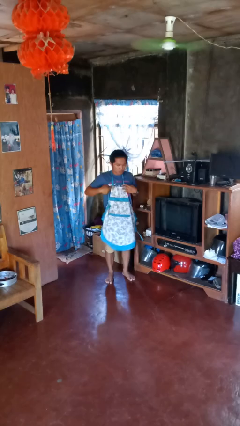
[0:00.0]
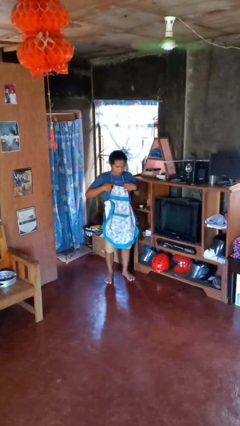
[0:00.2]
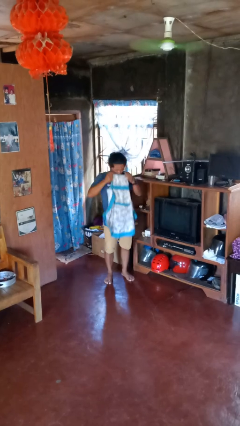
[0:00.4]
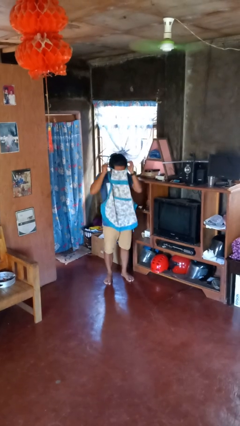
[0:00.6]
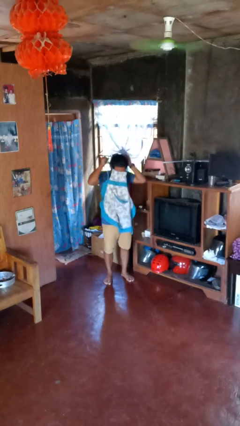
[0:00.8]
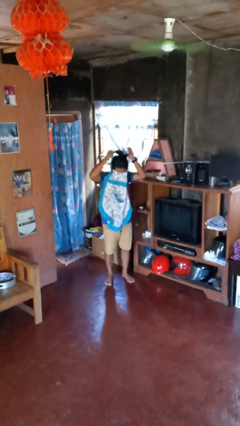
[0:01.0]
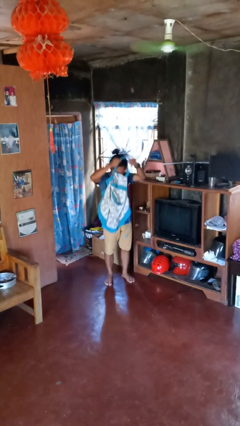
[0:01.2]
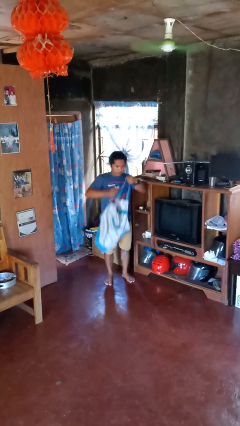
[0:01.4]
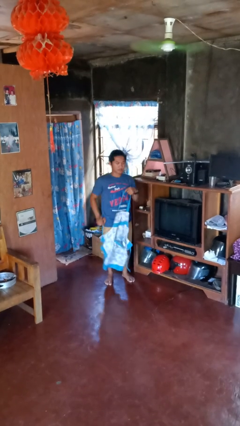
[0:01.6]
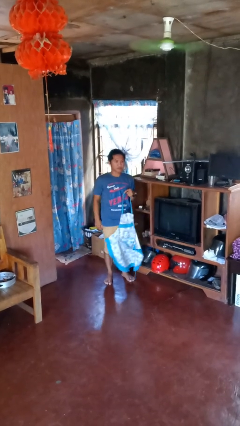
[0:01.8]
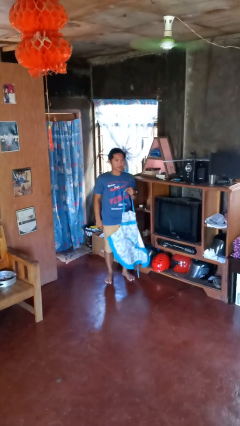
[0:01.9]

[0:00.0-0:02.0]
person takes off apron

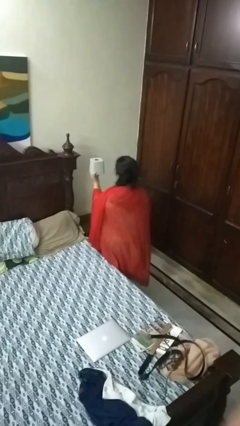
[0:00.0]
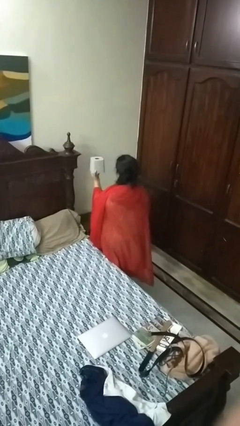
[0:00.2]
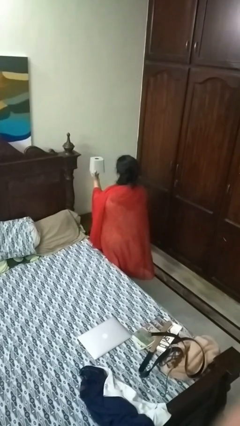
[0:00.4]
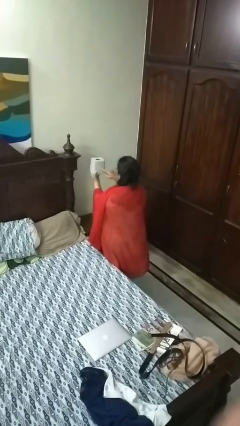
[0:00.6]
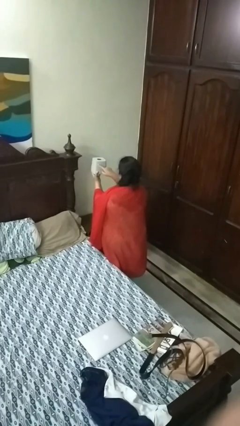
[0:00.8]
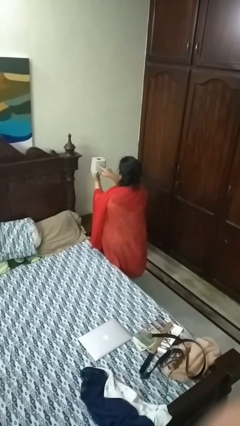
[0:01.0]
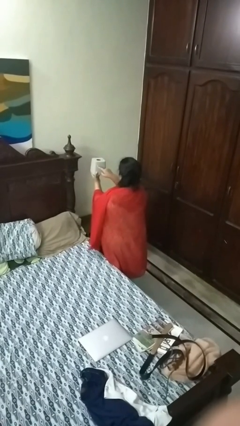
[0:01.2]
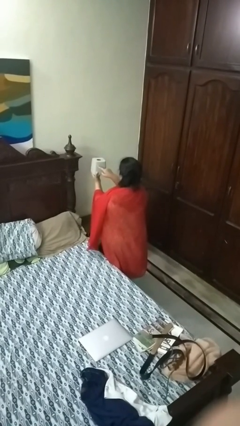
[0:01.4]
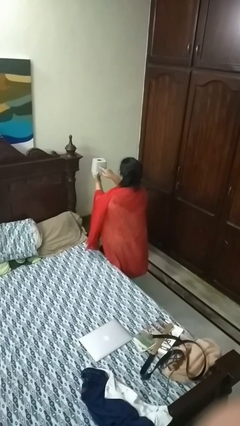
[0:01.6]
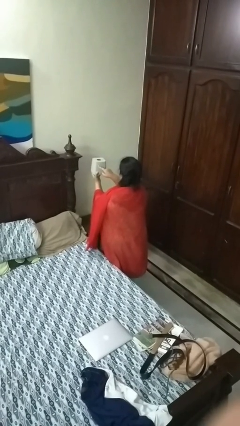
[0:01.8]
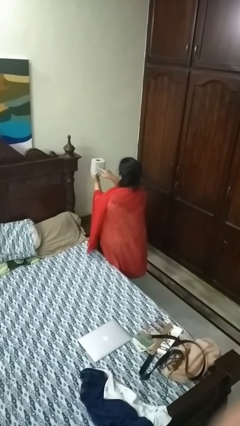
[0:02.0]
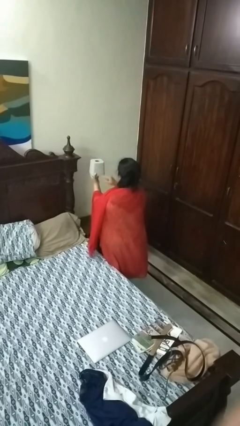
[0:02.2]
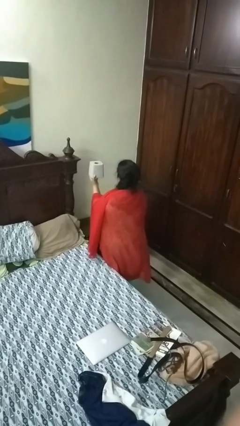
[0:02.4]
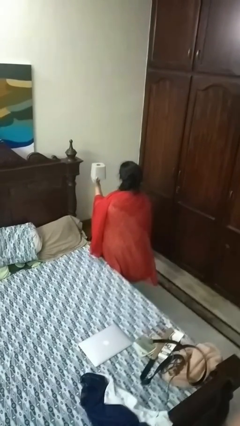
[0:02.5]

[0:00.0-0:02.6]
person taps object with finger

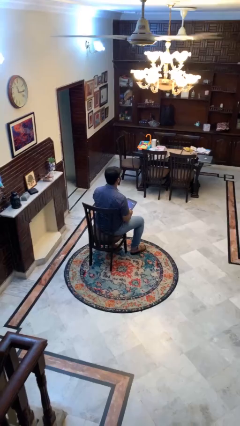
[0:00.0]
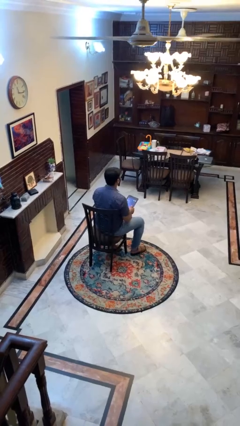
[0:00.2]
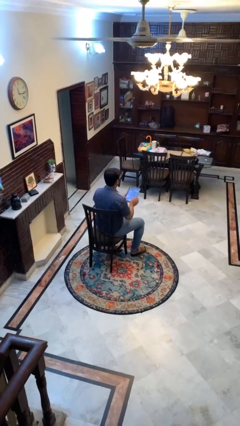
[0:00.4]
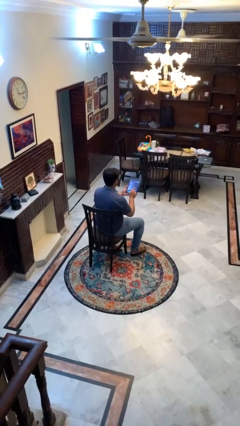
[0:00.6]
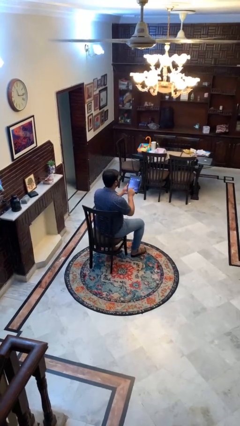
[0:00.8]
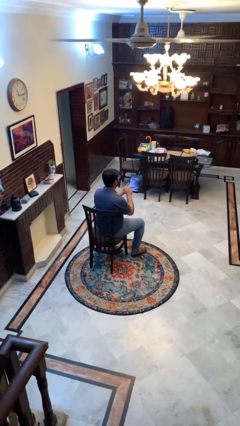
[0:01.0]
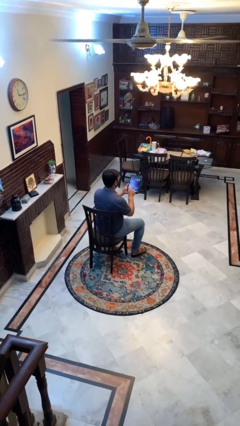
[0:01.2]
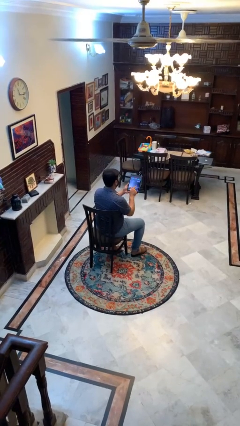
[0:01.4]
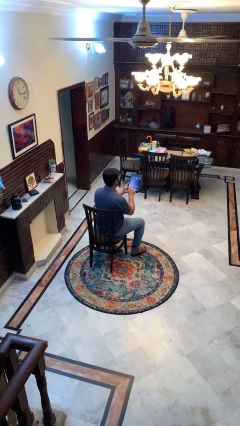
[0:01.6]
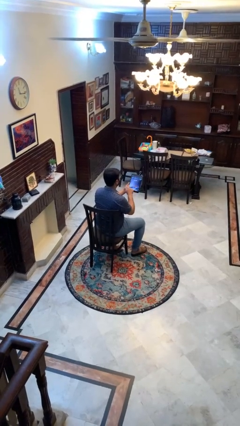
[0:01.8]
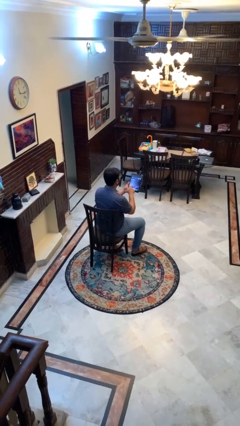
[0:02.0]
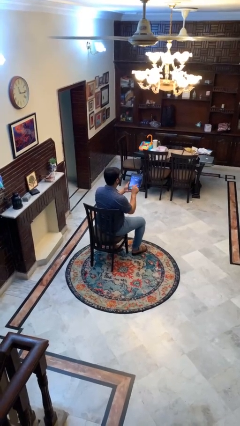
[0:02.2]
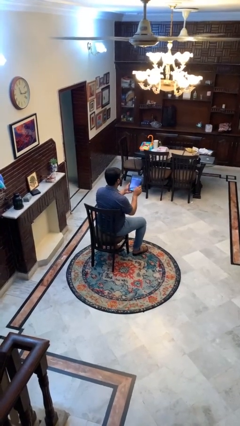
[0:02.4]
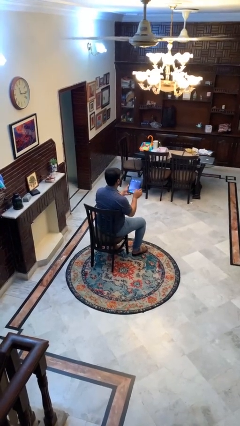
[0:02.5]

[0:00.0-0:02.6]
person interacts with tablet

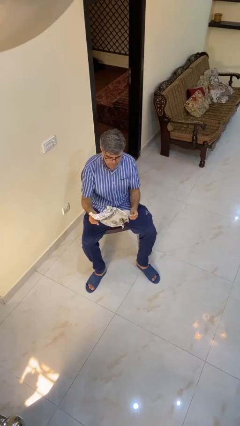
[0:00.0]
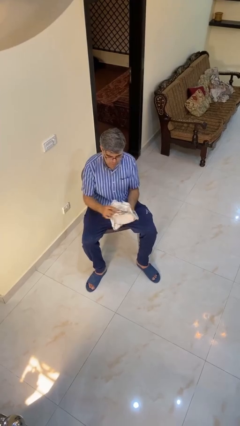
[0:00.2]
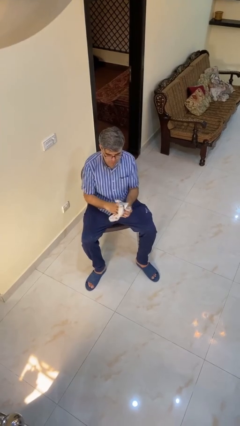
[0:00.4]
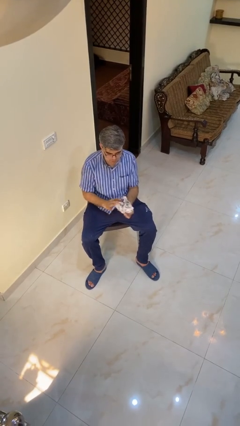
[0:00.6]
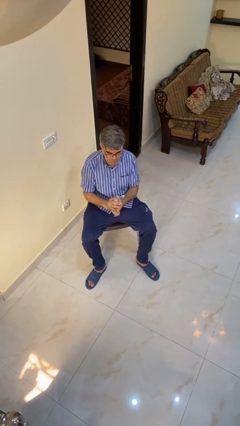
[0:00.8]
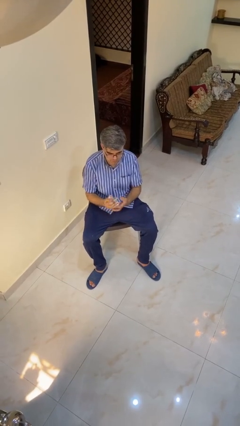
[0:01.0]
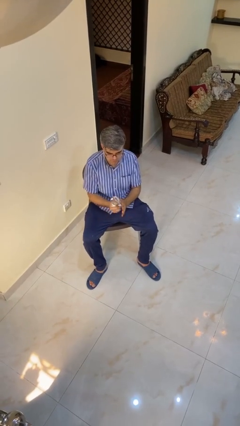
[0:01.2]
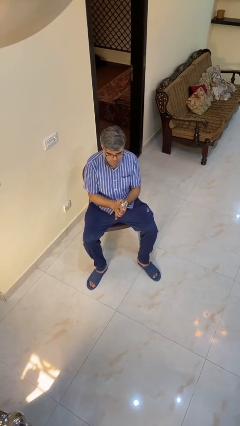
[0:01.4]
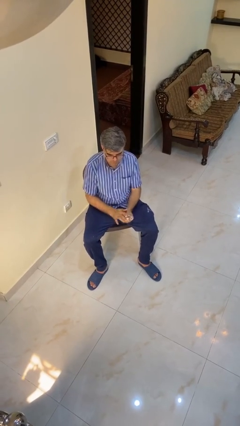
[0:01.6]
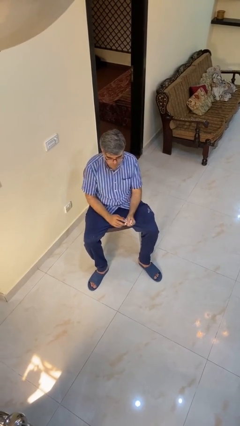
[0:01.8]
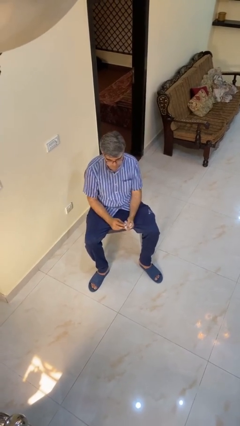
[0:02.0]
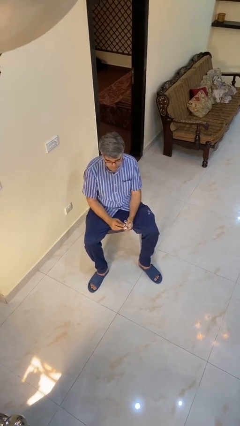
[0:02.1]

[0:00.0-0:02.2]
person crumples paper

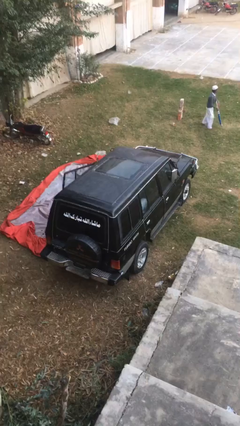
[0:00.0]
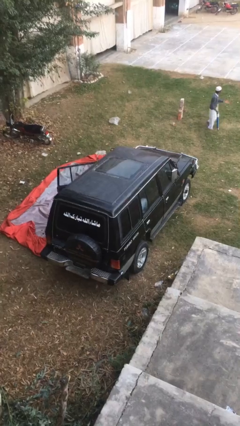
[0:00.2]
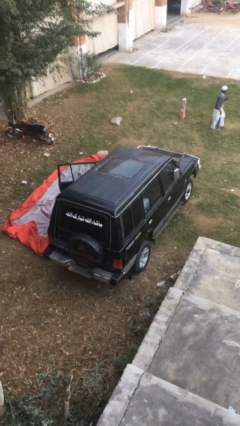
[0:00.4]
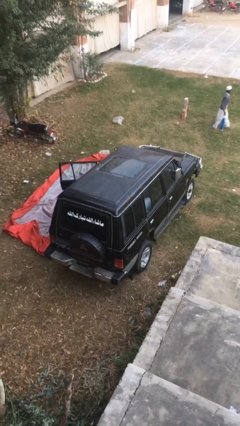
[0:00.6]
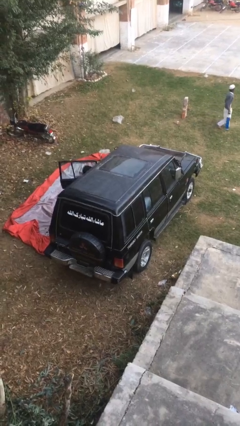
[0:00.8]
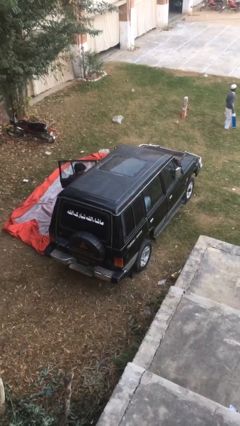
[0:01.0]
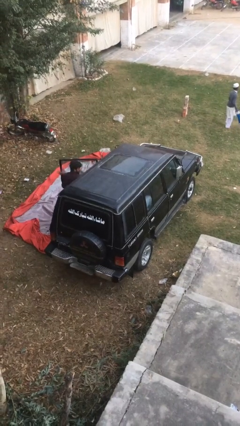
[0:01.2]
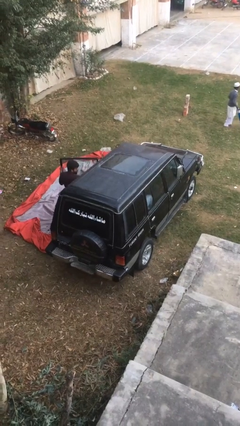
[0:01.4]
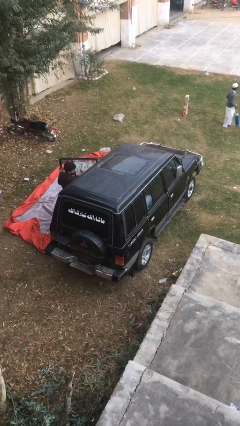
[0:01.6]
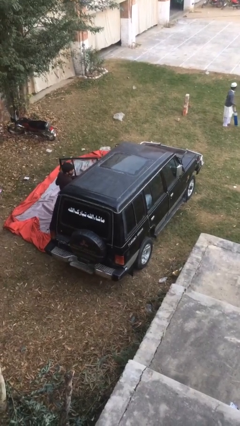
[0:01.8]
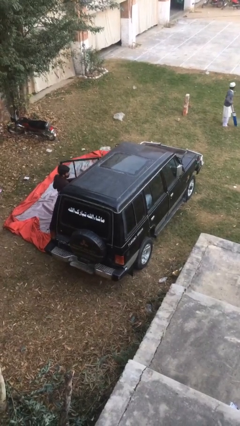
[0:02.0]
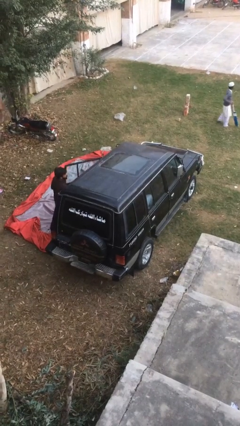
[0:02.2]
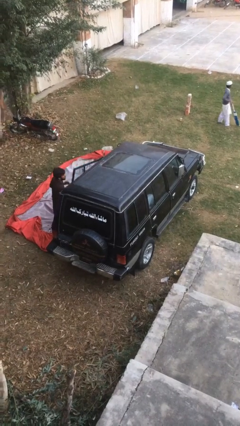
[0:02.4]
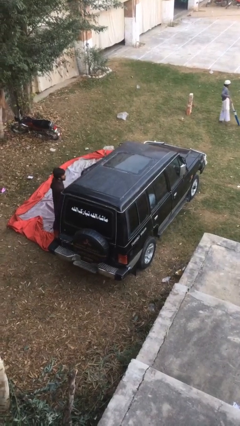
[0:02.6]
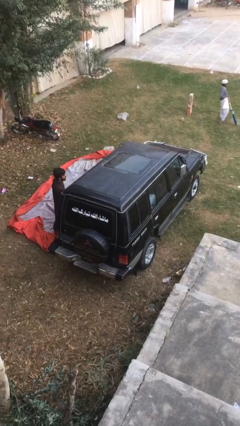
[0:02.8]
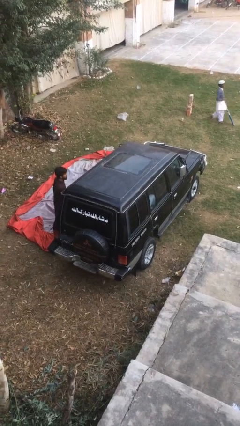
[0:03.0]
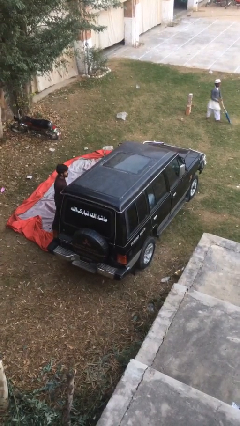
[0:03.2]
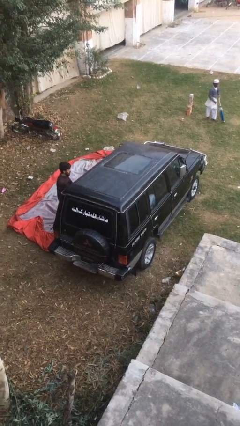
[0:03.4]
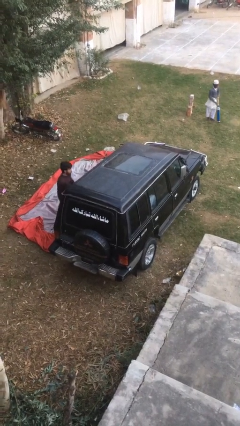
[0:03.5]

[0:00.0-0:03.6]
car drops off person

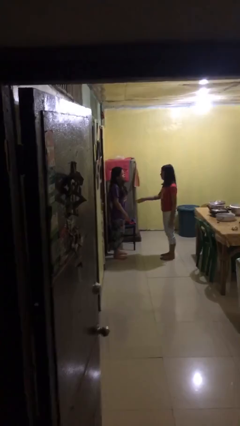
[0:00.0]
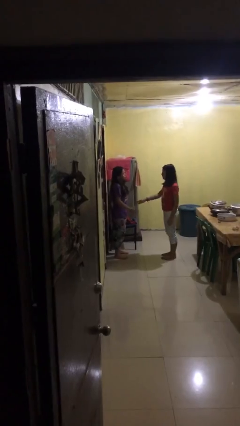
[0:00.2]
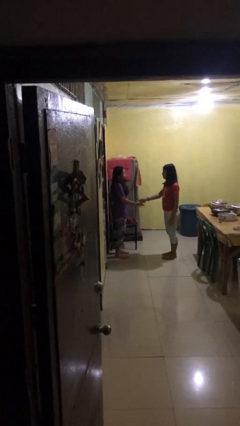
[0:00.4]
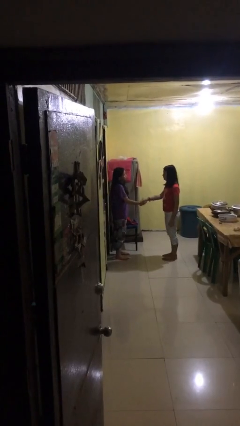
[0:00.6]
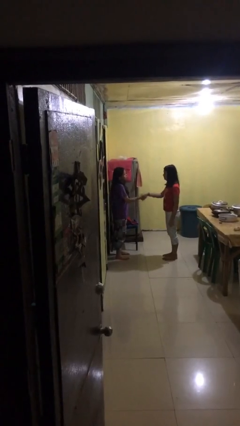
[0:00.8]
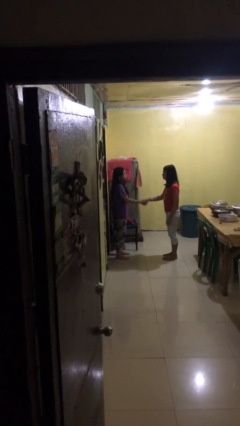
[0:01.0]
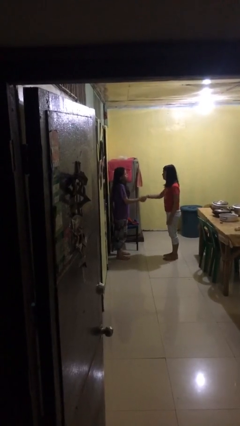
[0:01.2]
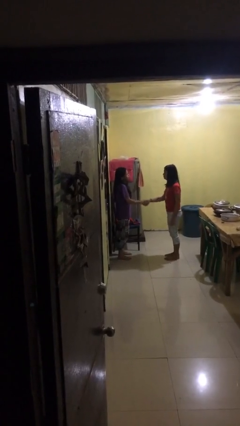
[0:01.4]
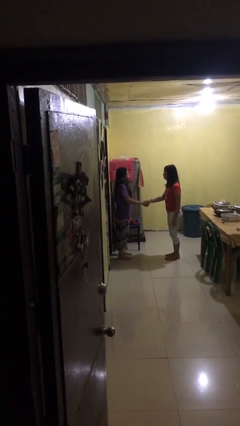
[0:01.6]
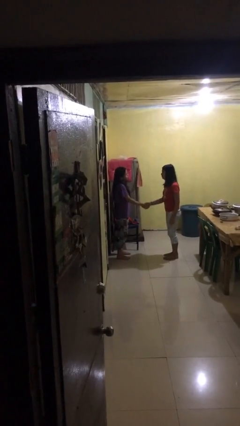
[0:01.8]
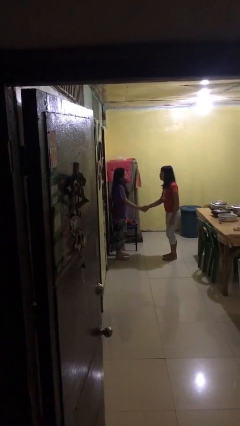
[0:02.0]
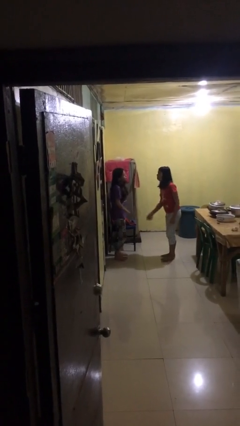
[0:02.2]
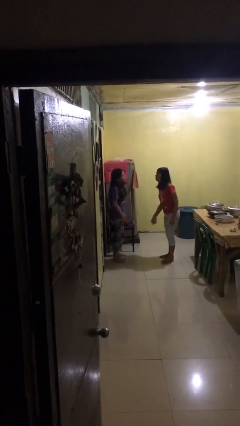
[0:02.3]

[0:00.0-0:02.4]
person shakes hand

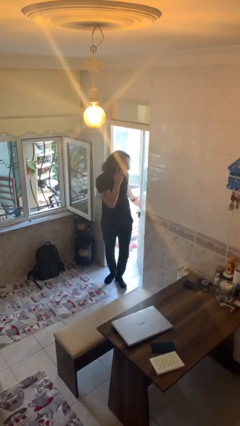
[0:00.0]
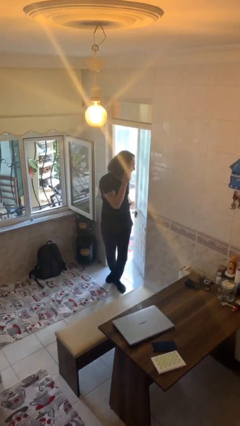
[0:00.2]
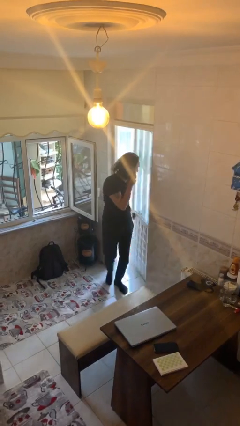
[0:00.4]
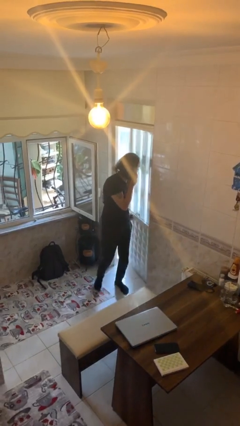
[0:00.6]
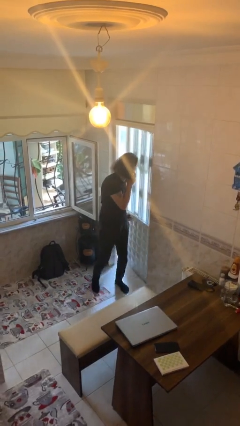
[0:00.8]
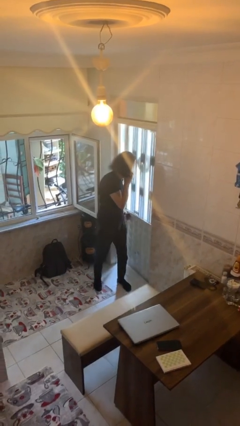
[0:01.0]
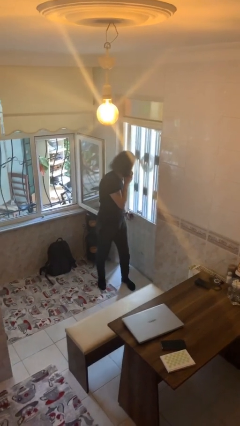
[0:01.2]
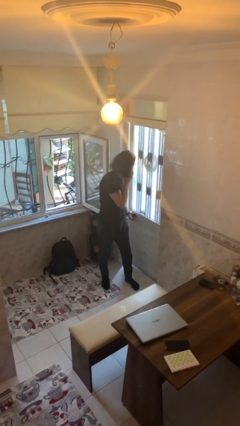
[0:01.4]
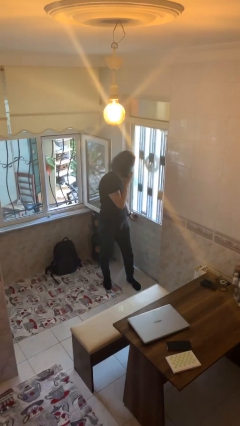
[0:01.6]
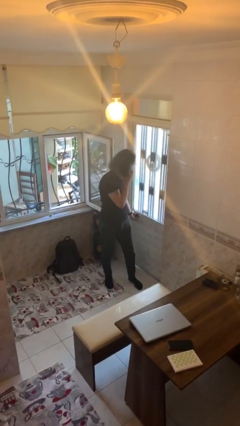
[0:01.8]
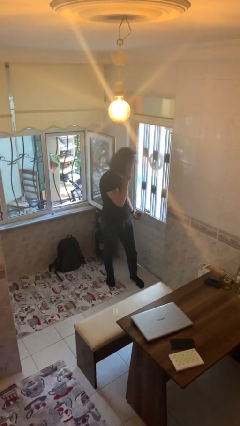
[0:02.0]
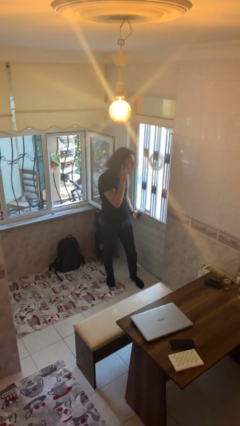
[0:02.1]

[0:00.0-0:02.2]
person closes facility door
